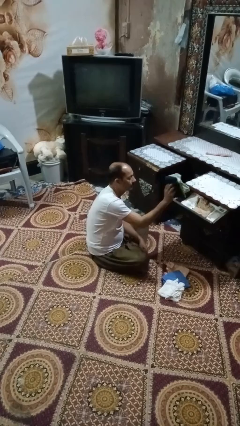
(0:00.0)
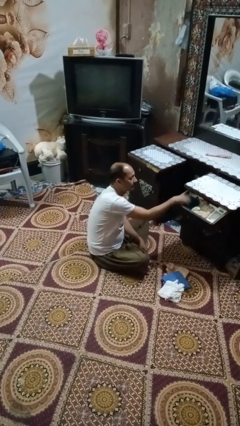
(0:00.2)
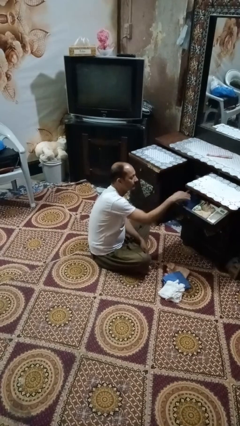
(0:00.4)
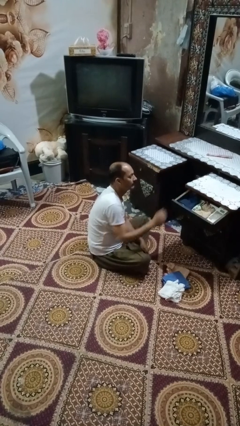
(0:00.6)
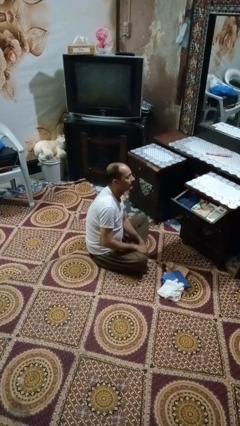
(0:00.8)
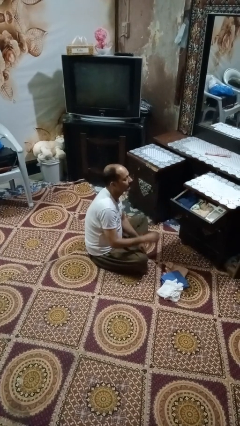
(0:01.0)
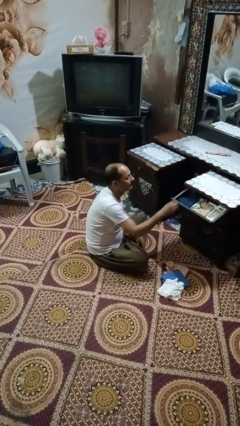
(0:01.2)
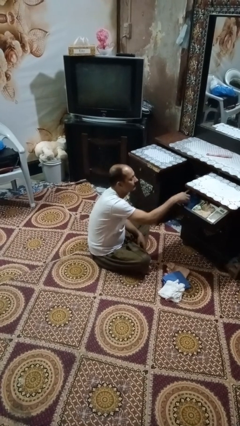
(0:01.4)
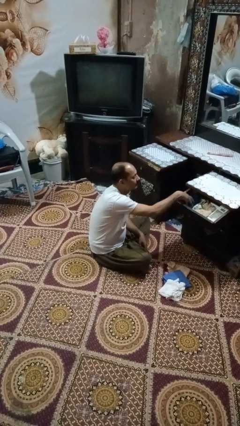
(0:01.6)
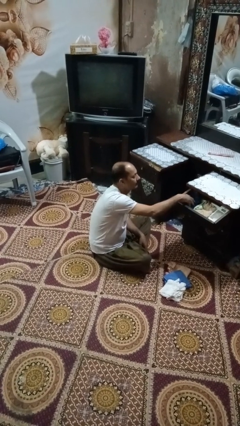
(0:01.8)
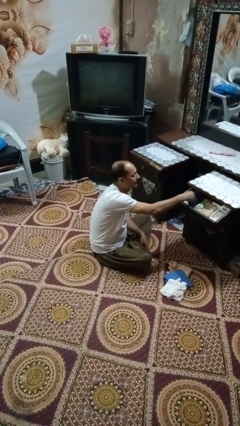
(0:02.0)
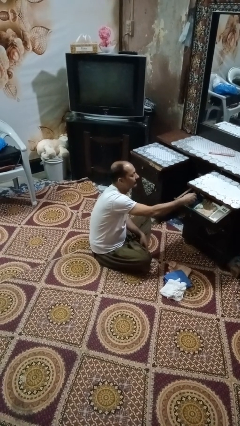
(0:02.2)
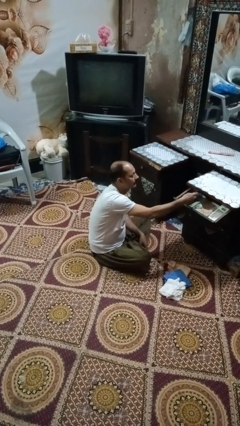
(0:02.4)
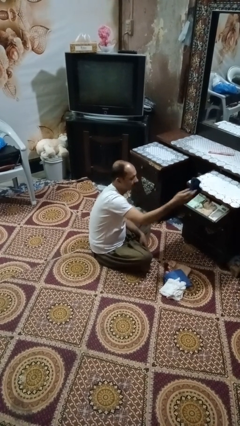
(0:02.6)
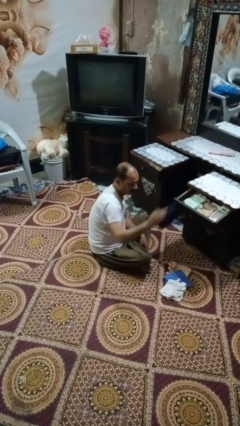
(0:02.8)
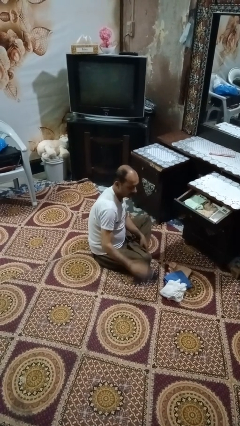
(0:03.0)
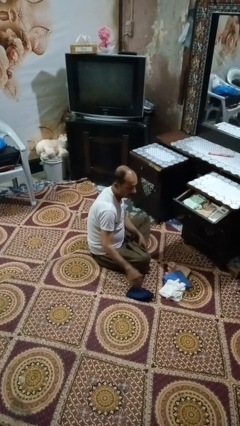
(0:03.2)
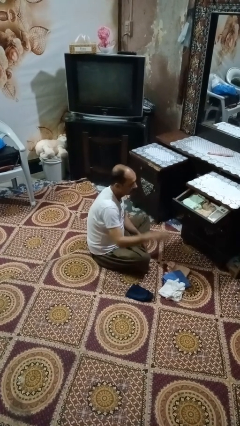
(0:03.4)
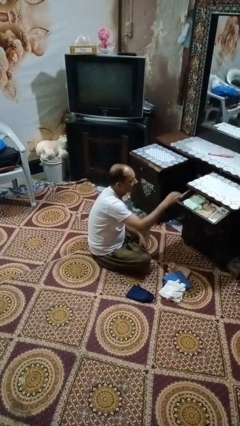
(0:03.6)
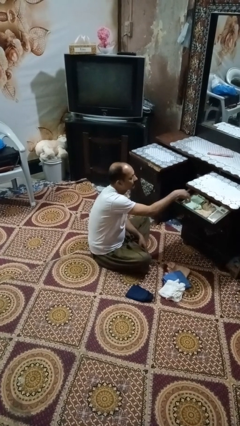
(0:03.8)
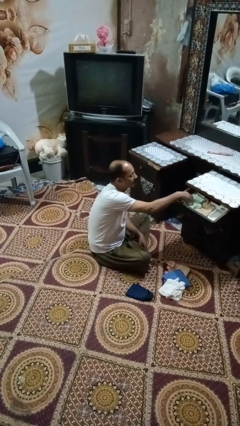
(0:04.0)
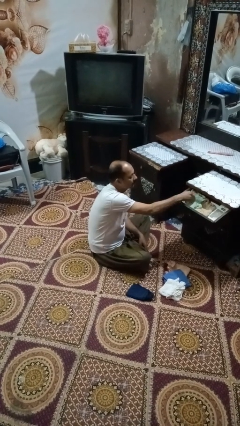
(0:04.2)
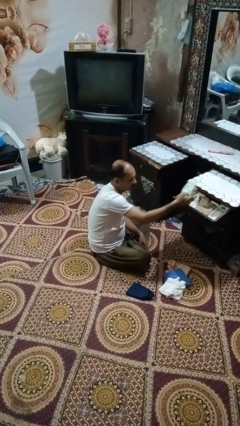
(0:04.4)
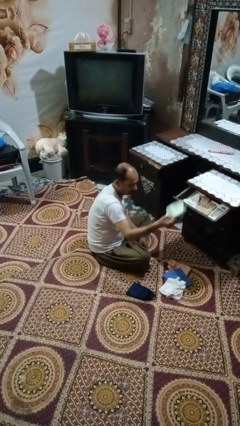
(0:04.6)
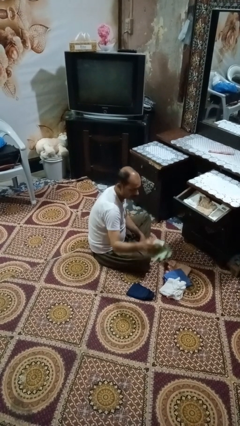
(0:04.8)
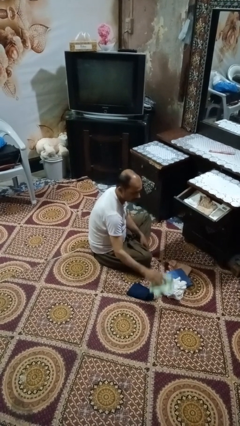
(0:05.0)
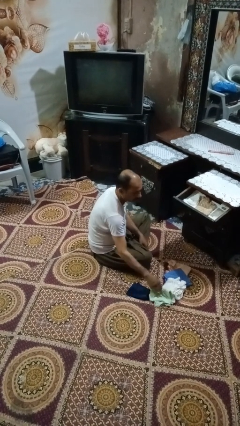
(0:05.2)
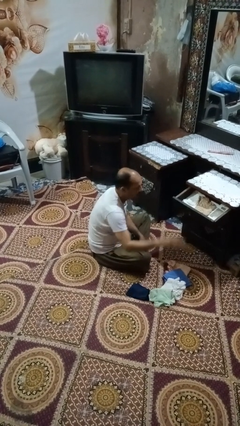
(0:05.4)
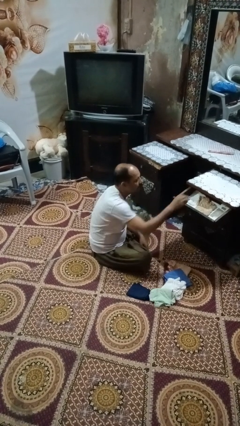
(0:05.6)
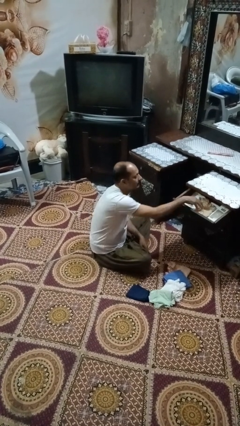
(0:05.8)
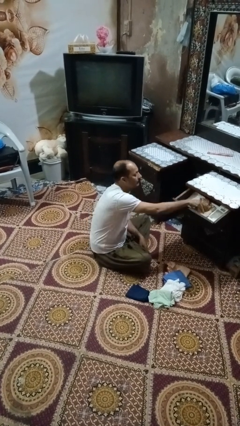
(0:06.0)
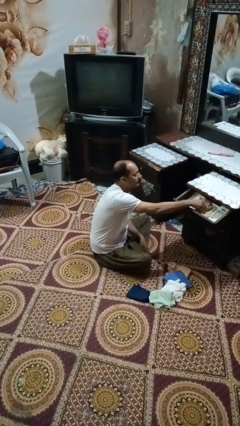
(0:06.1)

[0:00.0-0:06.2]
person takes clothes from dresser

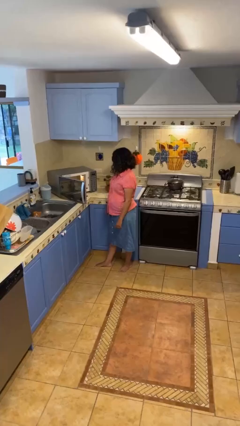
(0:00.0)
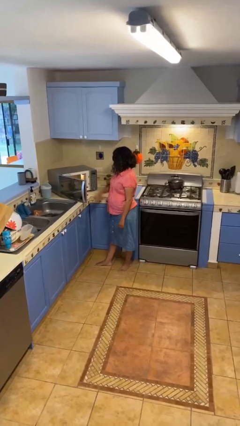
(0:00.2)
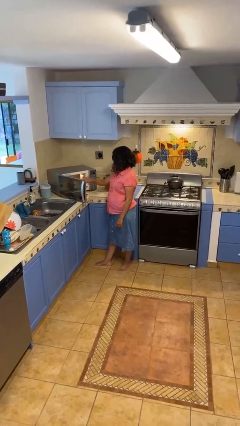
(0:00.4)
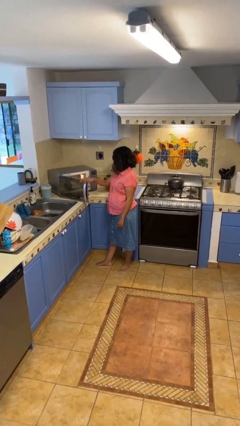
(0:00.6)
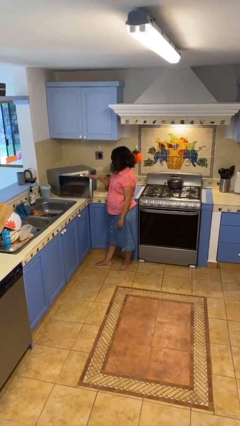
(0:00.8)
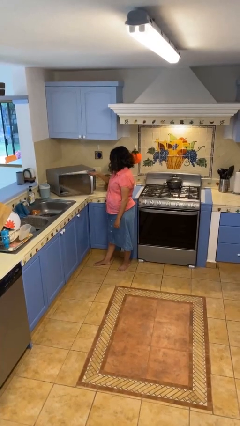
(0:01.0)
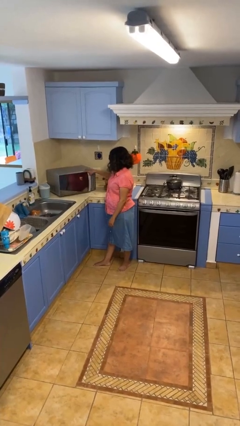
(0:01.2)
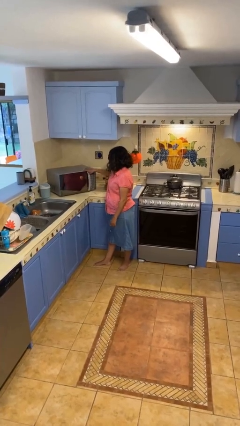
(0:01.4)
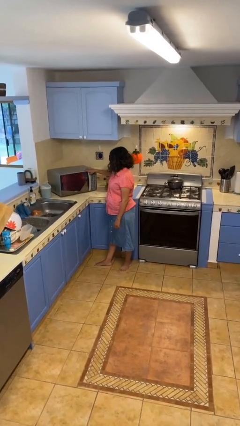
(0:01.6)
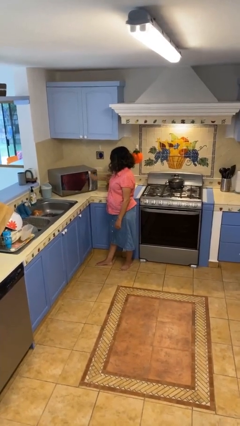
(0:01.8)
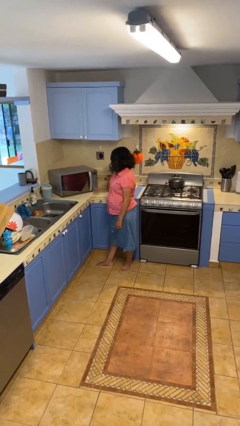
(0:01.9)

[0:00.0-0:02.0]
person closes microwave

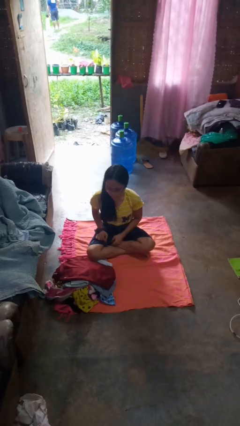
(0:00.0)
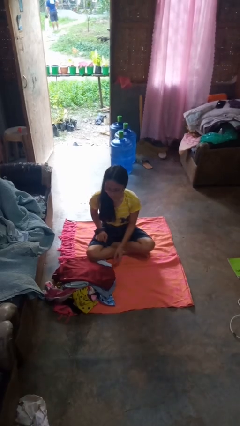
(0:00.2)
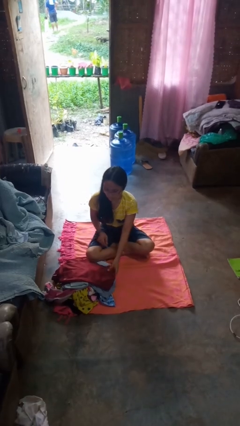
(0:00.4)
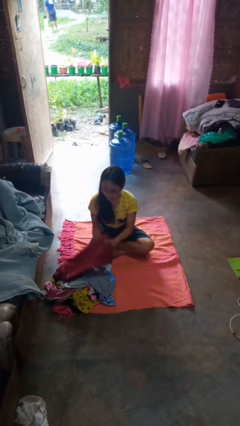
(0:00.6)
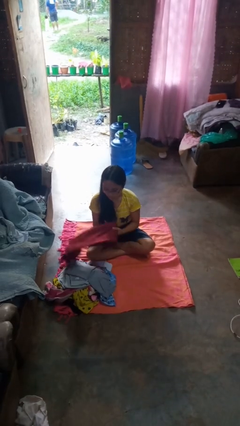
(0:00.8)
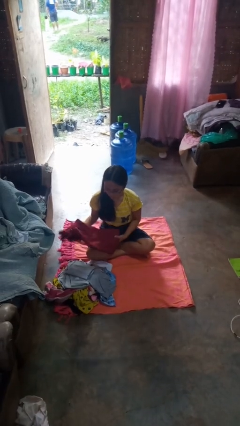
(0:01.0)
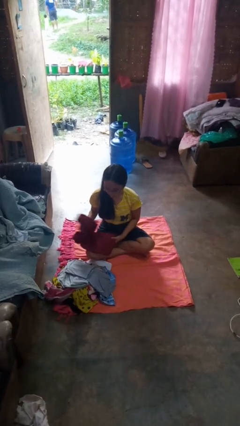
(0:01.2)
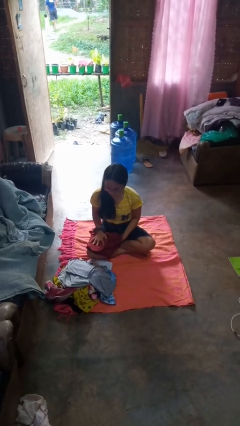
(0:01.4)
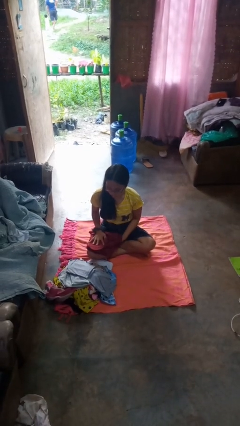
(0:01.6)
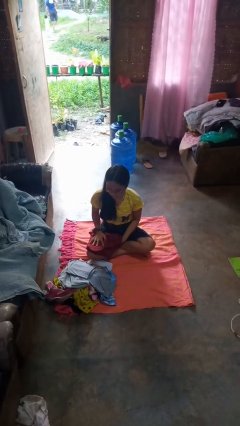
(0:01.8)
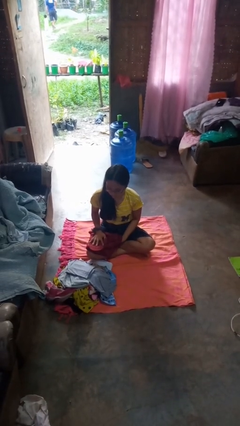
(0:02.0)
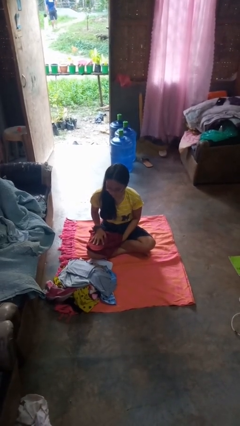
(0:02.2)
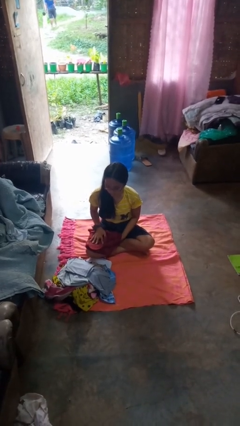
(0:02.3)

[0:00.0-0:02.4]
person folds pants

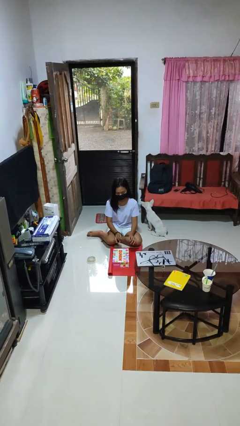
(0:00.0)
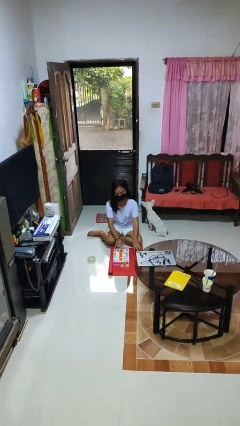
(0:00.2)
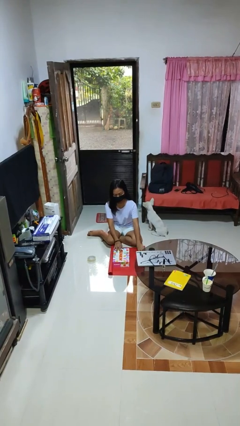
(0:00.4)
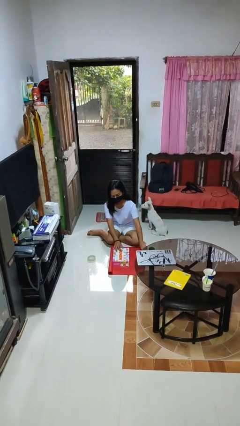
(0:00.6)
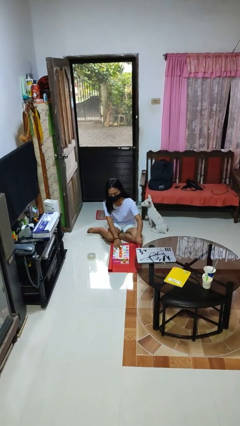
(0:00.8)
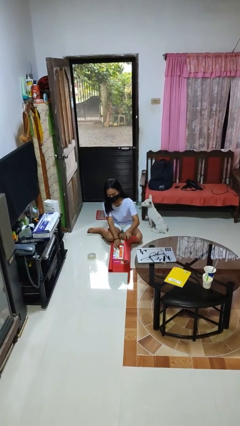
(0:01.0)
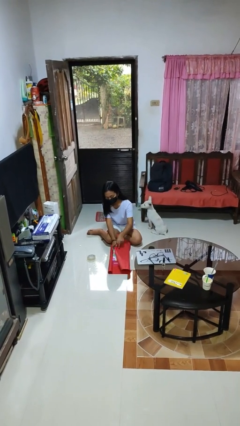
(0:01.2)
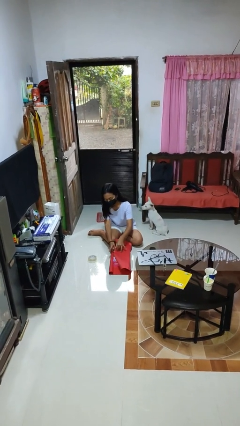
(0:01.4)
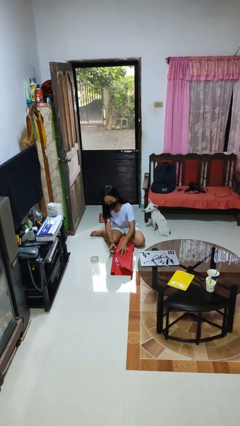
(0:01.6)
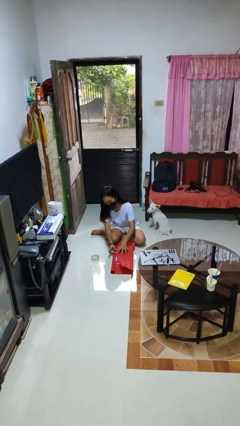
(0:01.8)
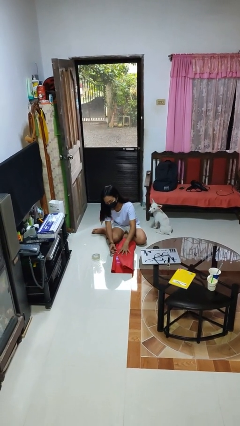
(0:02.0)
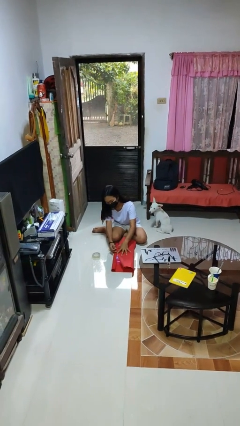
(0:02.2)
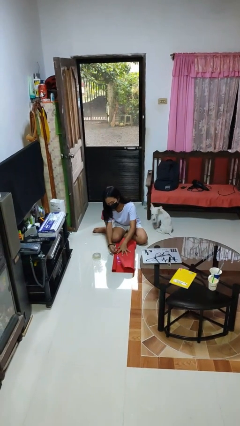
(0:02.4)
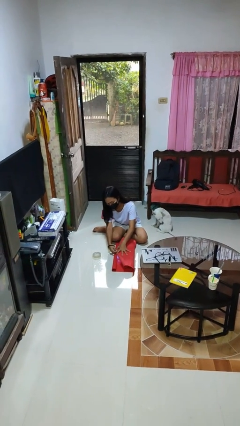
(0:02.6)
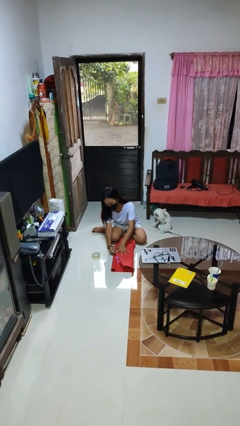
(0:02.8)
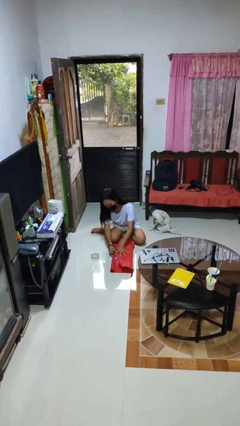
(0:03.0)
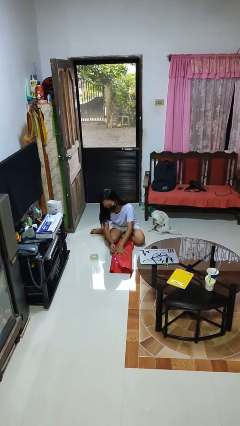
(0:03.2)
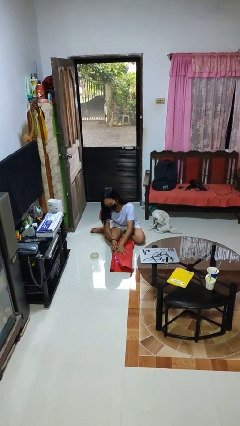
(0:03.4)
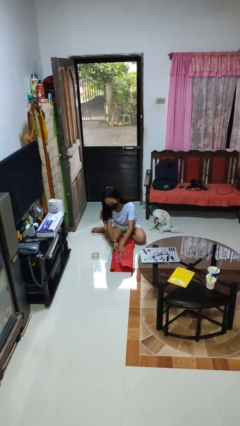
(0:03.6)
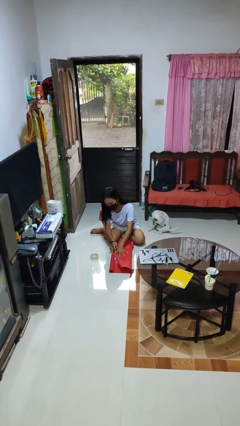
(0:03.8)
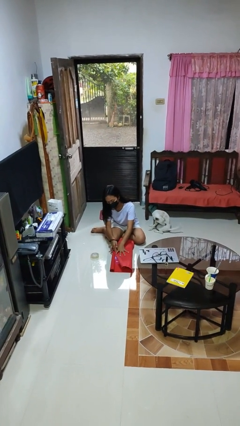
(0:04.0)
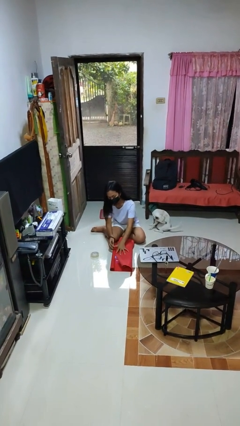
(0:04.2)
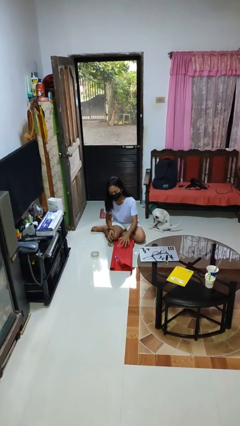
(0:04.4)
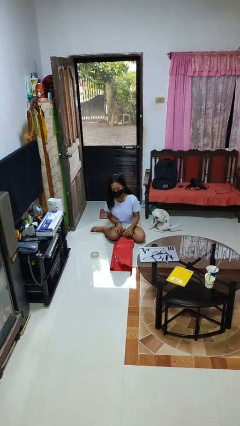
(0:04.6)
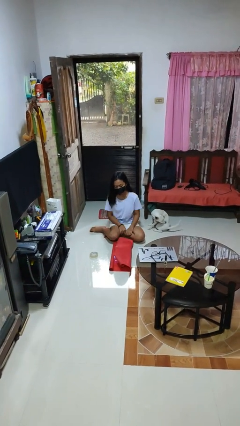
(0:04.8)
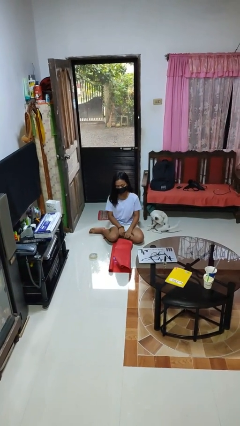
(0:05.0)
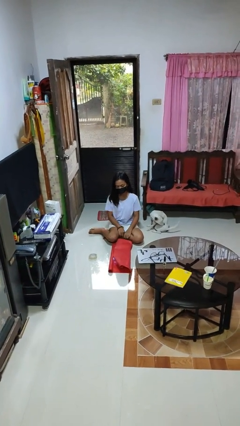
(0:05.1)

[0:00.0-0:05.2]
person wraps box

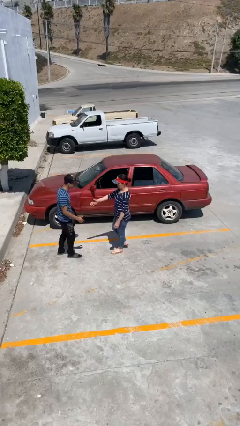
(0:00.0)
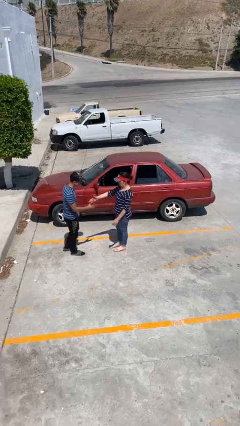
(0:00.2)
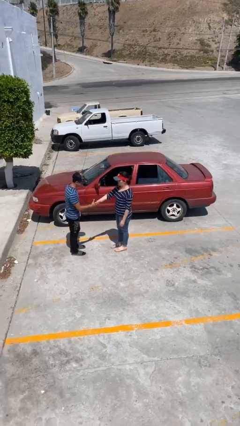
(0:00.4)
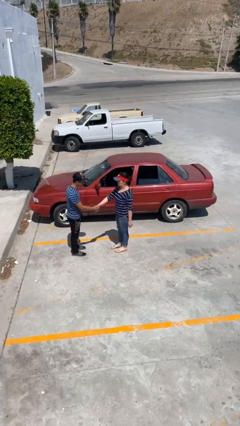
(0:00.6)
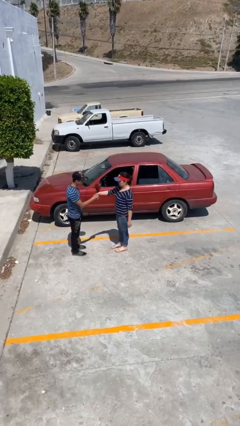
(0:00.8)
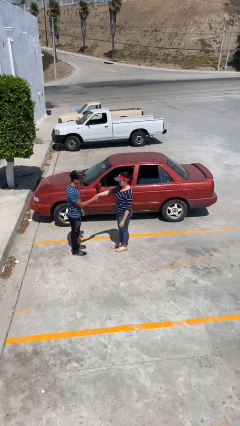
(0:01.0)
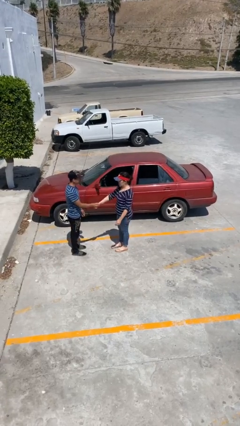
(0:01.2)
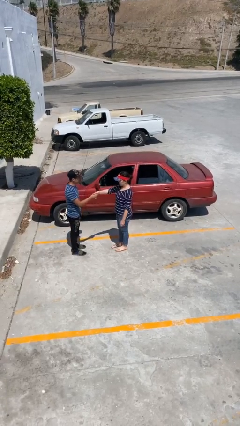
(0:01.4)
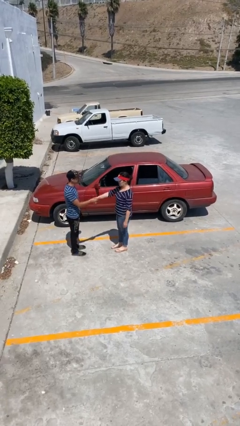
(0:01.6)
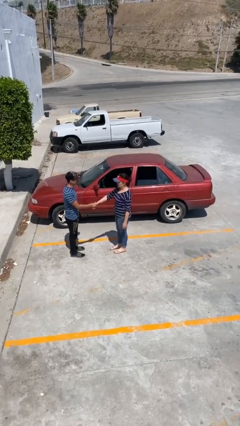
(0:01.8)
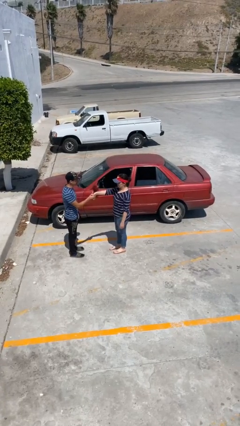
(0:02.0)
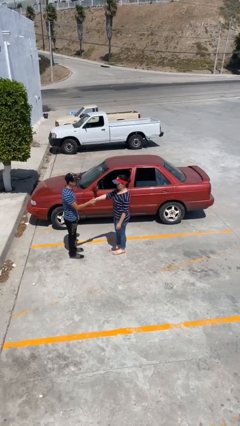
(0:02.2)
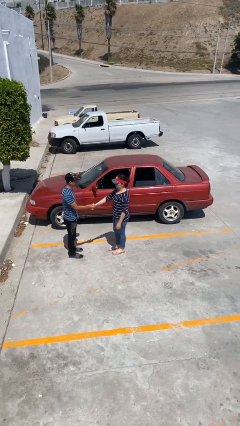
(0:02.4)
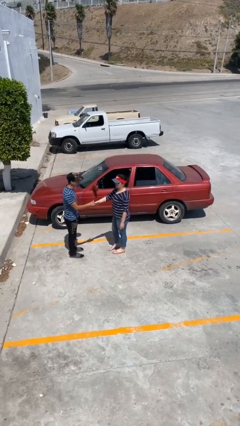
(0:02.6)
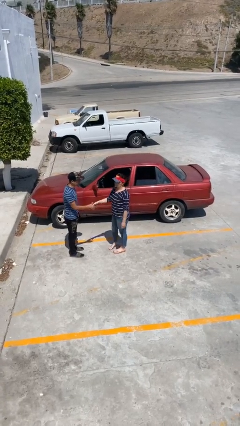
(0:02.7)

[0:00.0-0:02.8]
person shakes hand
